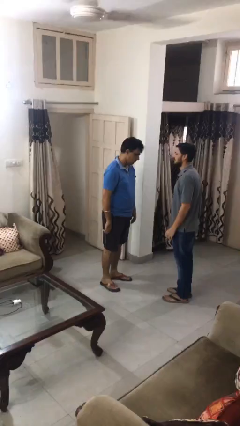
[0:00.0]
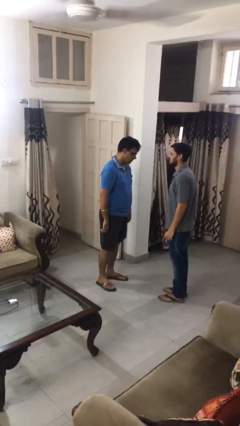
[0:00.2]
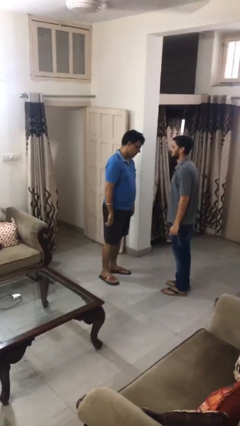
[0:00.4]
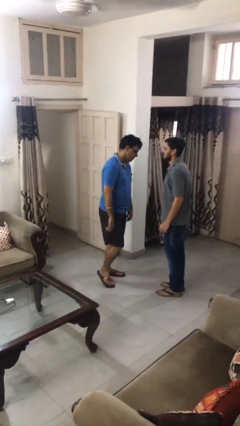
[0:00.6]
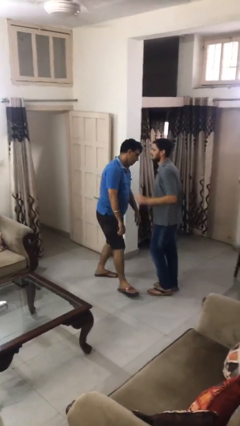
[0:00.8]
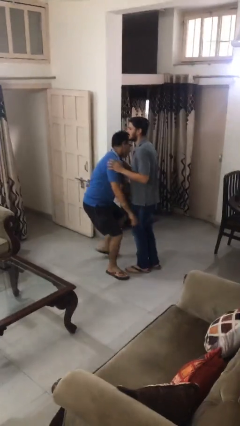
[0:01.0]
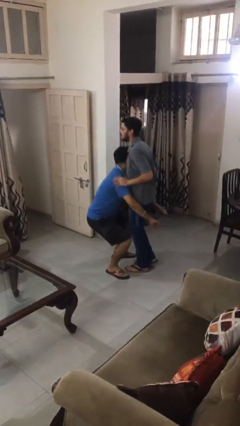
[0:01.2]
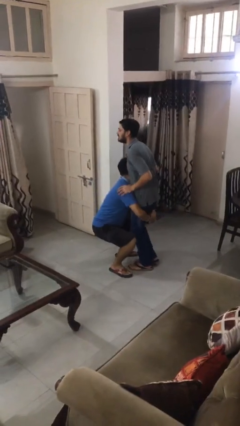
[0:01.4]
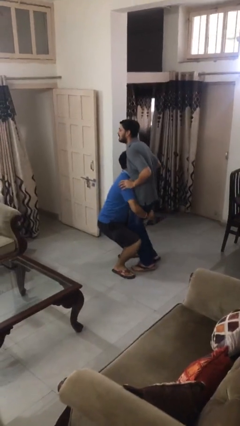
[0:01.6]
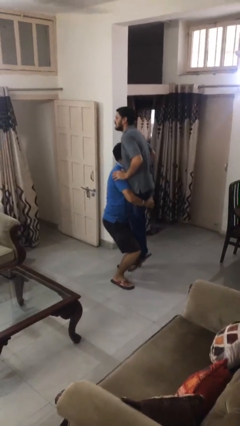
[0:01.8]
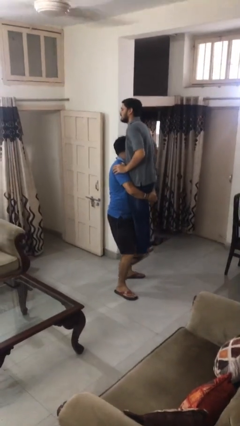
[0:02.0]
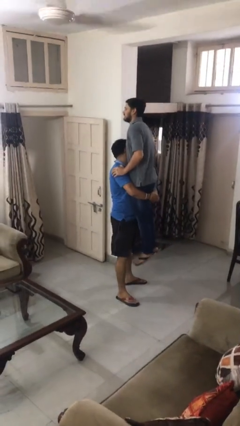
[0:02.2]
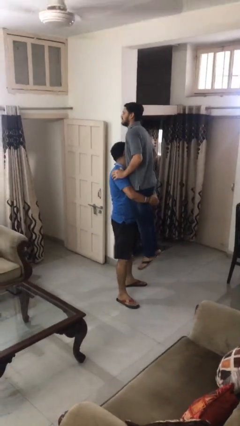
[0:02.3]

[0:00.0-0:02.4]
person picks up person

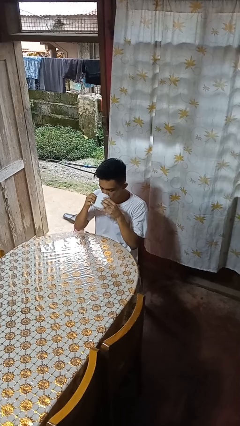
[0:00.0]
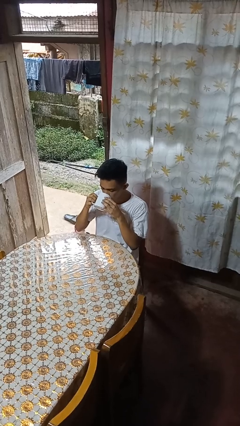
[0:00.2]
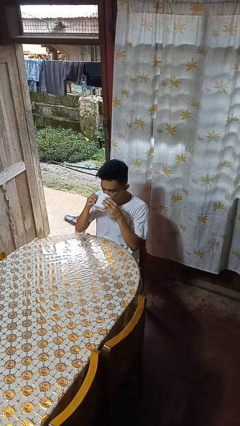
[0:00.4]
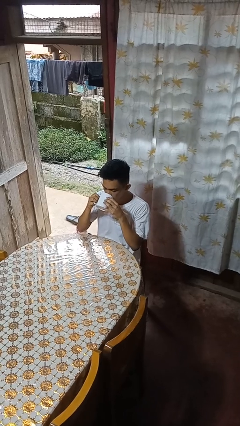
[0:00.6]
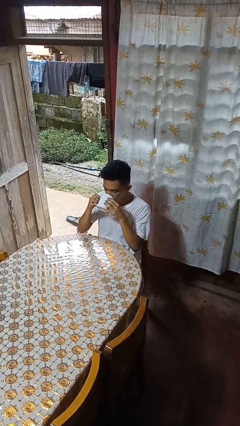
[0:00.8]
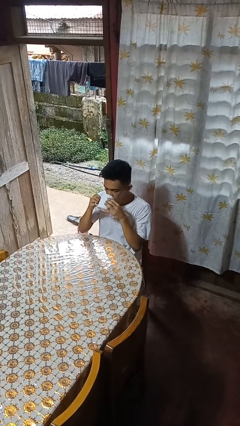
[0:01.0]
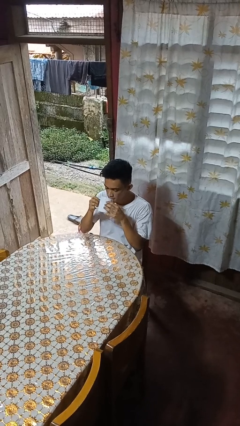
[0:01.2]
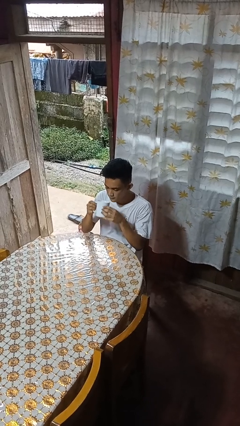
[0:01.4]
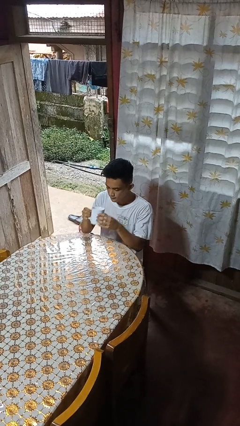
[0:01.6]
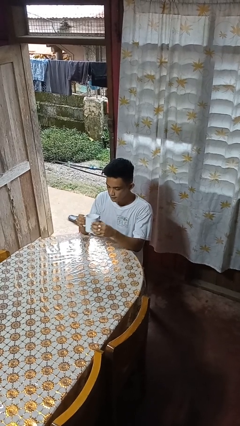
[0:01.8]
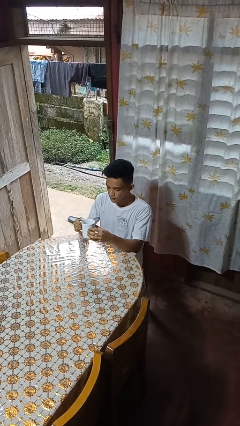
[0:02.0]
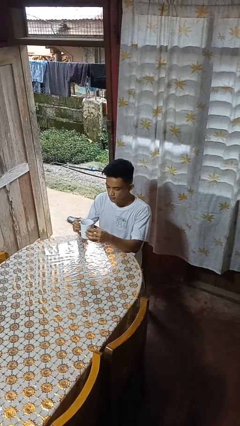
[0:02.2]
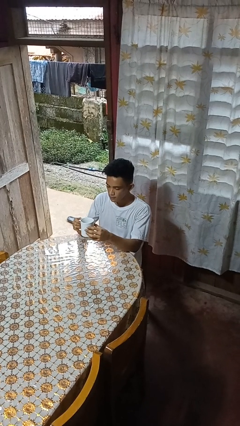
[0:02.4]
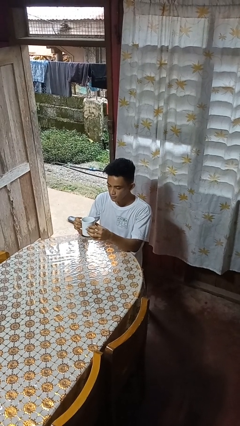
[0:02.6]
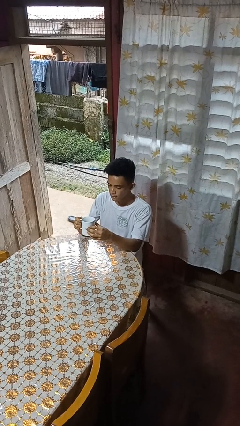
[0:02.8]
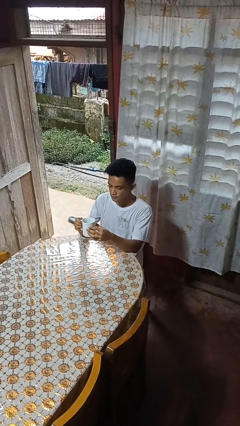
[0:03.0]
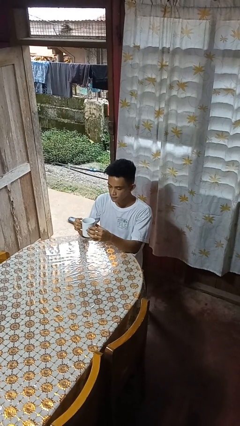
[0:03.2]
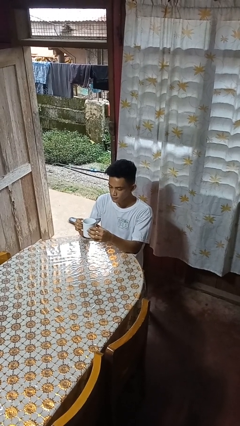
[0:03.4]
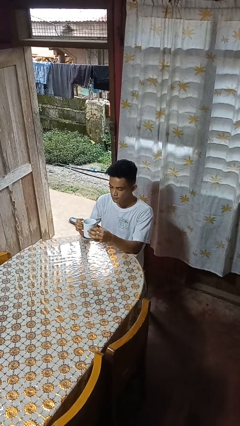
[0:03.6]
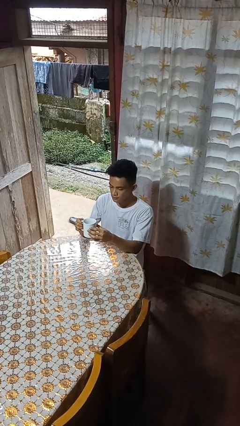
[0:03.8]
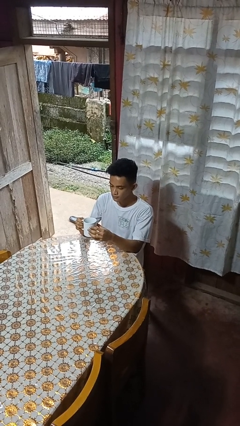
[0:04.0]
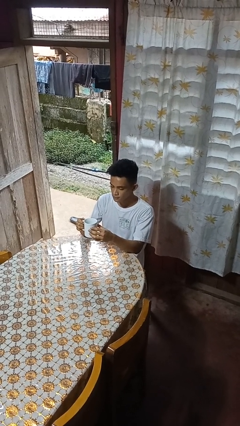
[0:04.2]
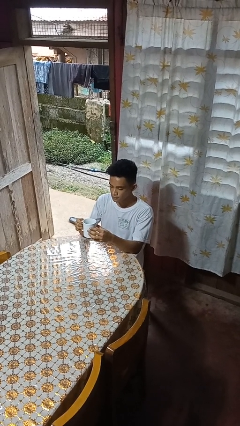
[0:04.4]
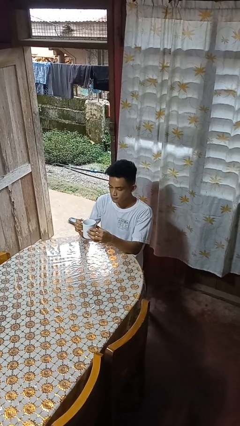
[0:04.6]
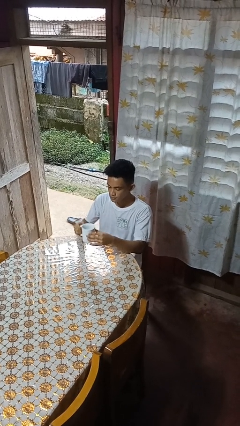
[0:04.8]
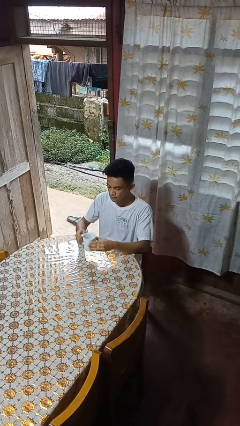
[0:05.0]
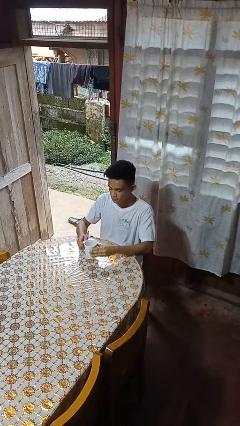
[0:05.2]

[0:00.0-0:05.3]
person drinks from mug

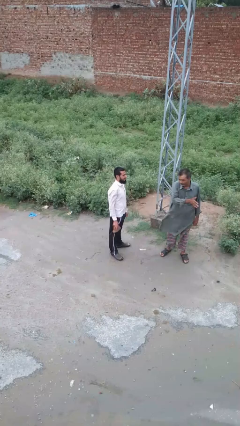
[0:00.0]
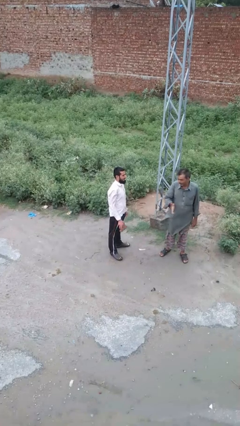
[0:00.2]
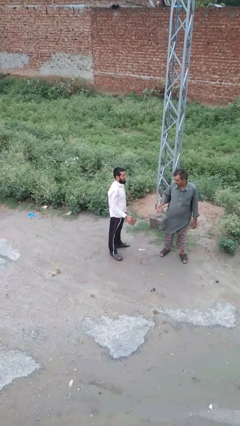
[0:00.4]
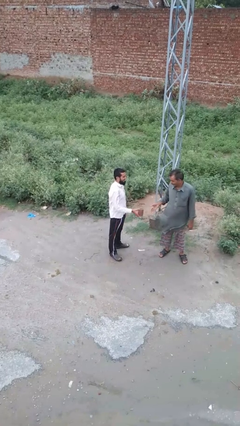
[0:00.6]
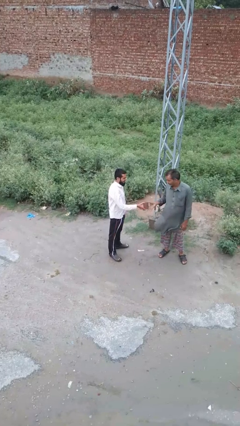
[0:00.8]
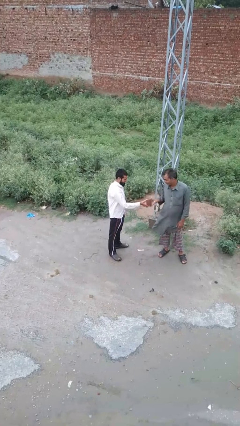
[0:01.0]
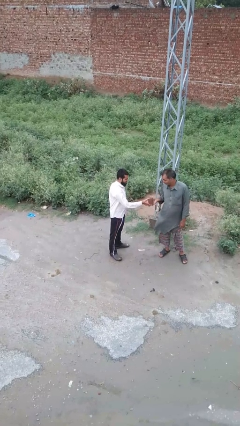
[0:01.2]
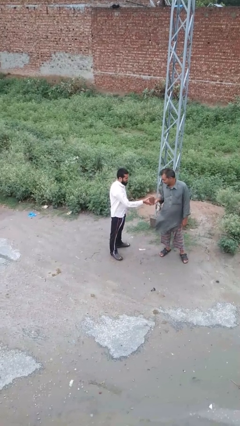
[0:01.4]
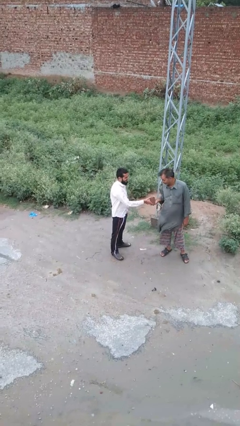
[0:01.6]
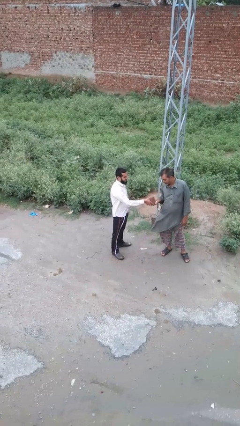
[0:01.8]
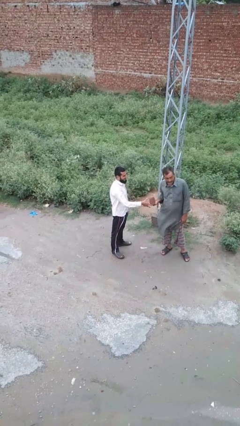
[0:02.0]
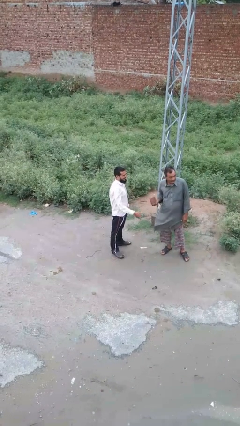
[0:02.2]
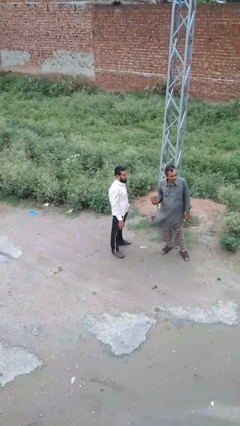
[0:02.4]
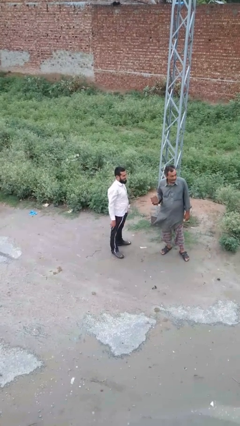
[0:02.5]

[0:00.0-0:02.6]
person transfers object to person

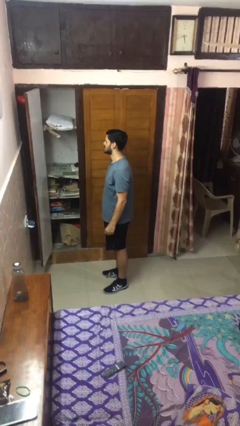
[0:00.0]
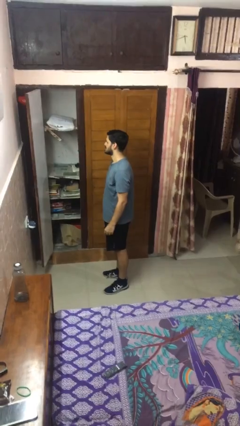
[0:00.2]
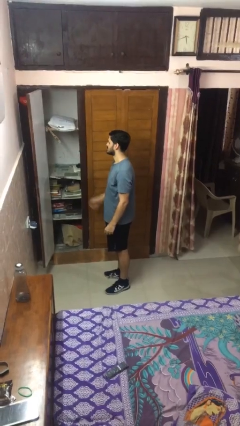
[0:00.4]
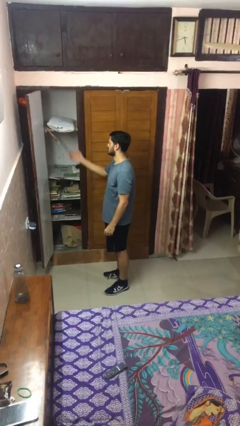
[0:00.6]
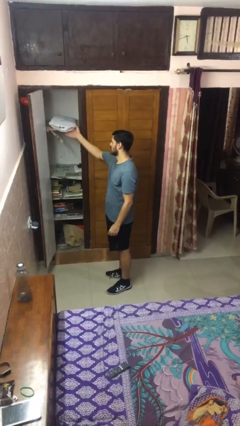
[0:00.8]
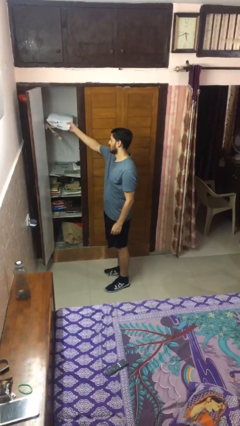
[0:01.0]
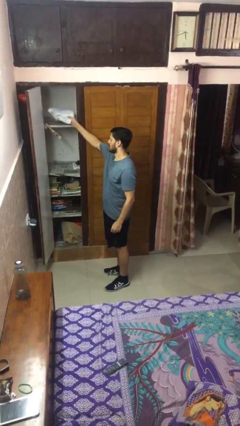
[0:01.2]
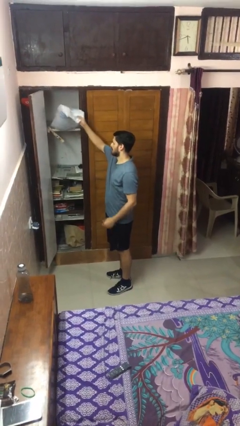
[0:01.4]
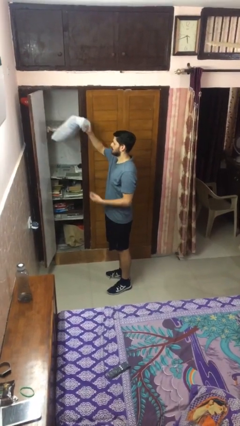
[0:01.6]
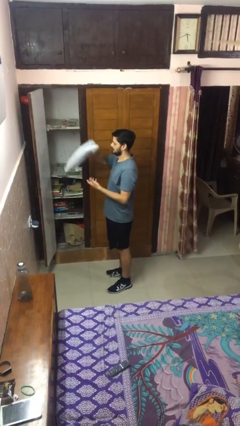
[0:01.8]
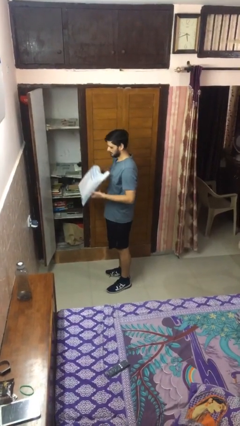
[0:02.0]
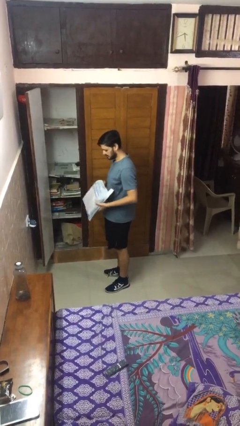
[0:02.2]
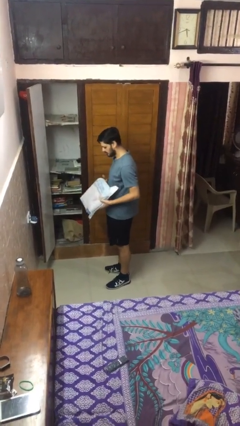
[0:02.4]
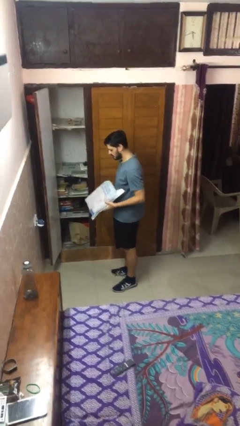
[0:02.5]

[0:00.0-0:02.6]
person picks up object from shelf

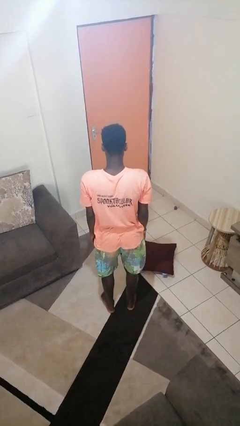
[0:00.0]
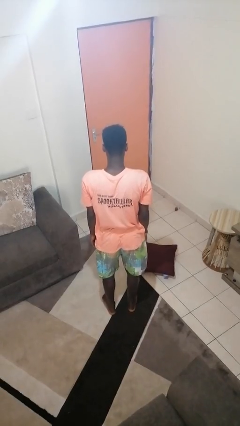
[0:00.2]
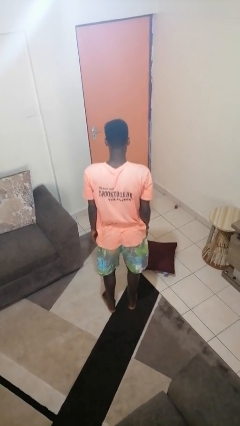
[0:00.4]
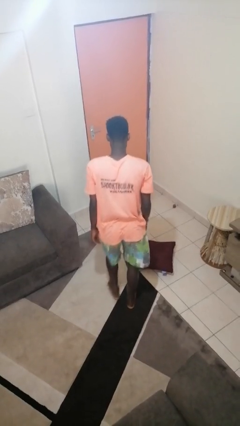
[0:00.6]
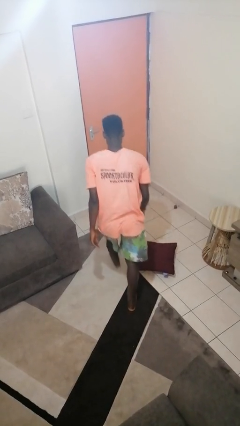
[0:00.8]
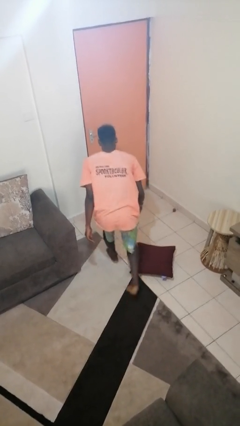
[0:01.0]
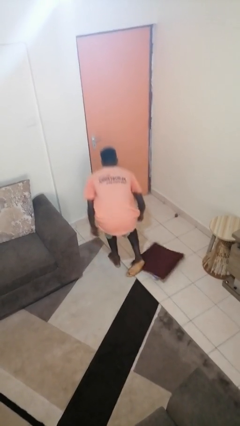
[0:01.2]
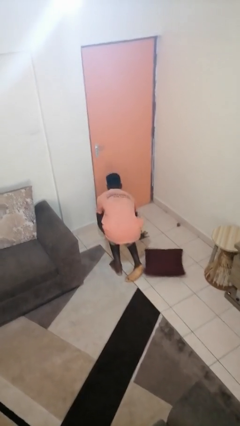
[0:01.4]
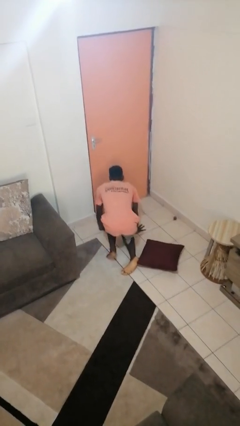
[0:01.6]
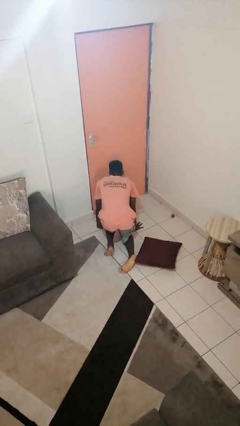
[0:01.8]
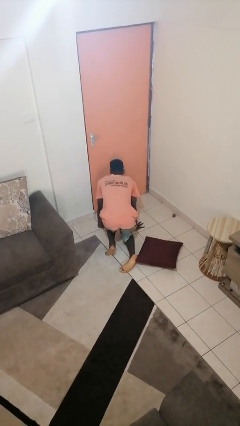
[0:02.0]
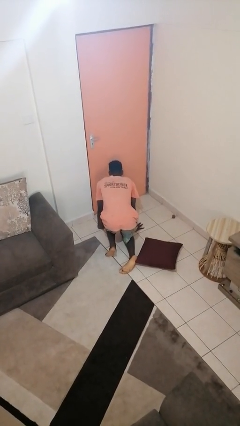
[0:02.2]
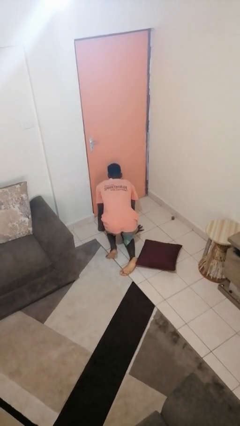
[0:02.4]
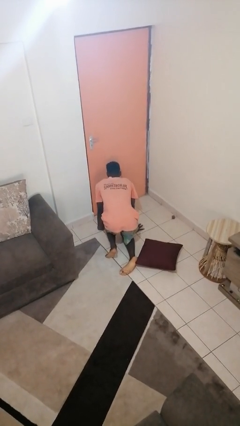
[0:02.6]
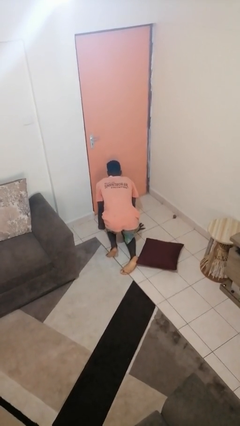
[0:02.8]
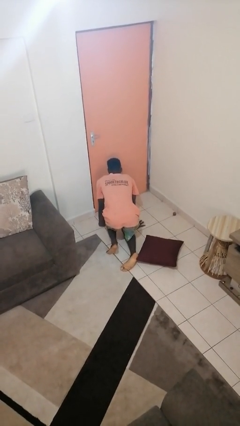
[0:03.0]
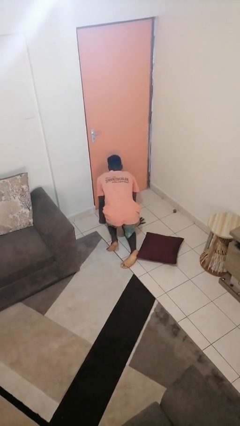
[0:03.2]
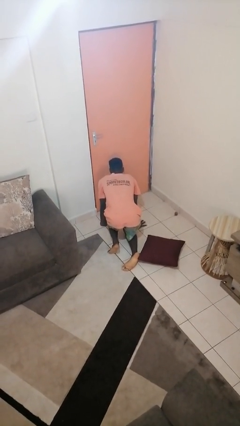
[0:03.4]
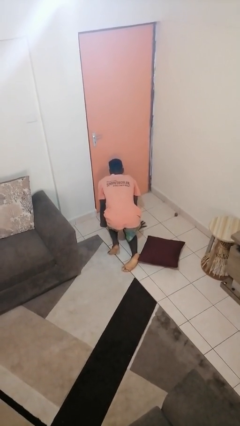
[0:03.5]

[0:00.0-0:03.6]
person trips on object on floor

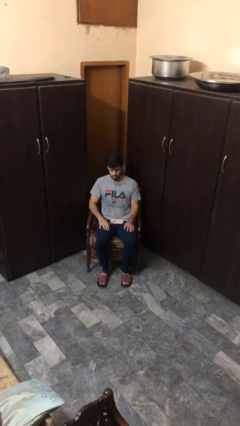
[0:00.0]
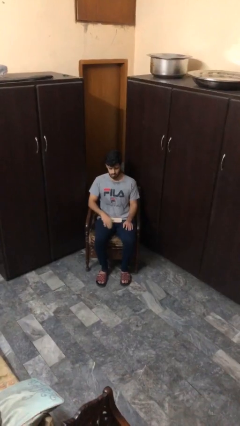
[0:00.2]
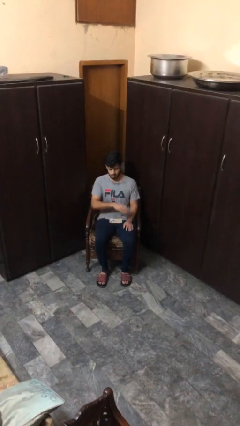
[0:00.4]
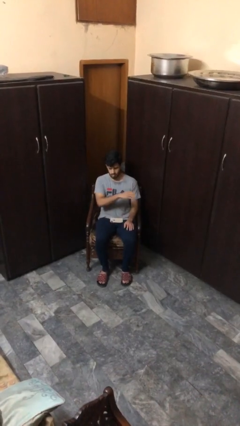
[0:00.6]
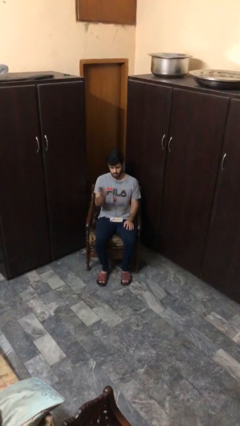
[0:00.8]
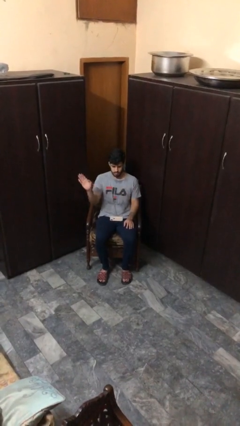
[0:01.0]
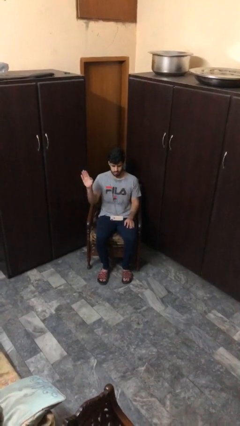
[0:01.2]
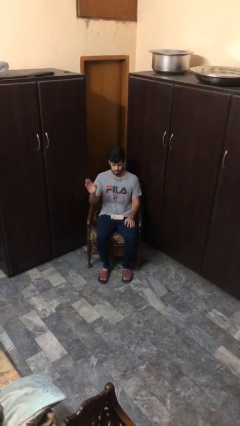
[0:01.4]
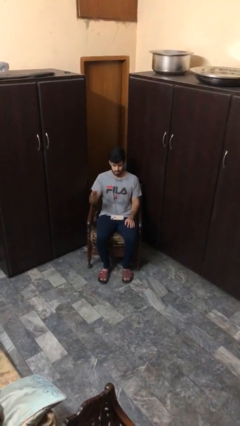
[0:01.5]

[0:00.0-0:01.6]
person gestures swipe right
